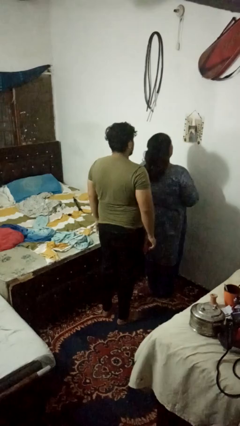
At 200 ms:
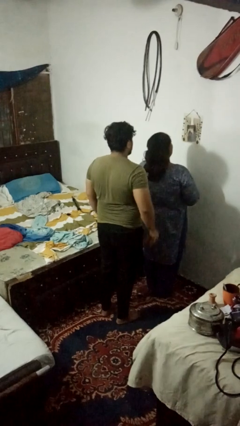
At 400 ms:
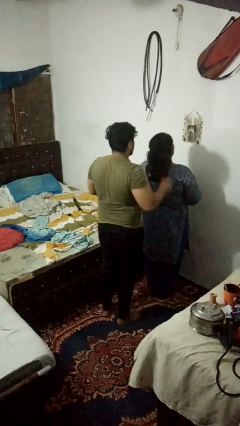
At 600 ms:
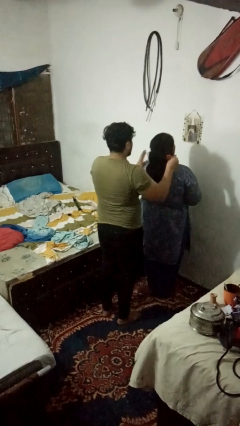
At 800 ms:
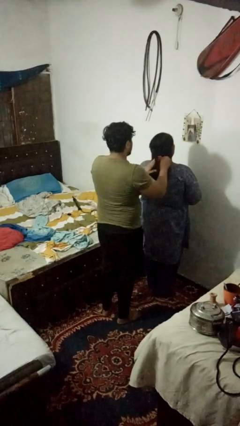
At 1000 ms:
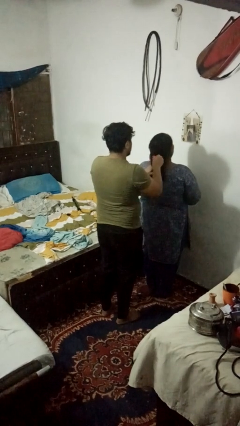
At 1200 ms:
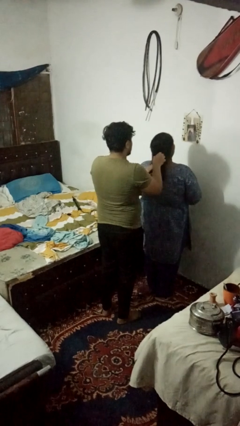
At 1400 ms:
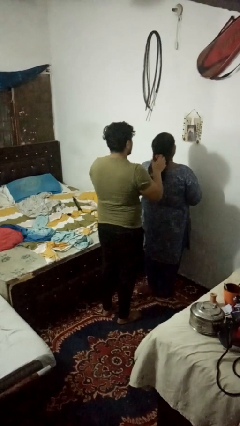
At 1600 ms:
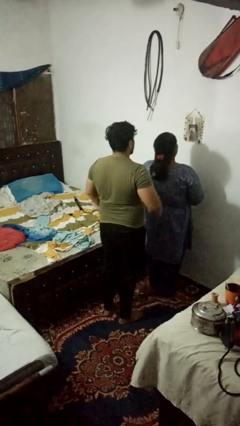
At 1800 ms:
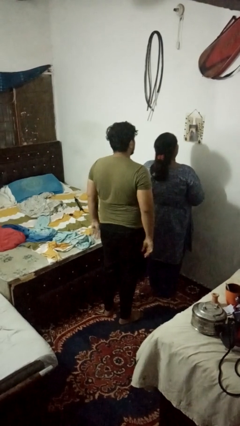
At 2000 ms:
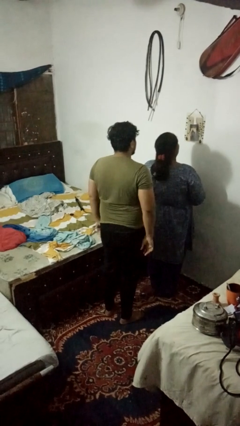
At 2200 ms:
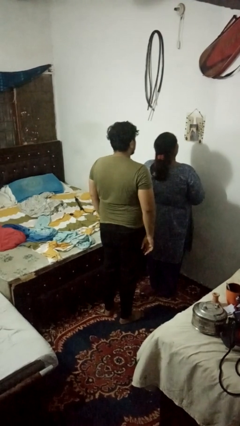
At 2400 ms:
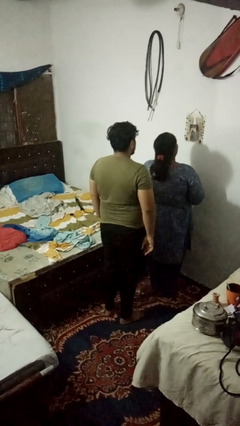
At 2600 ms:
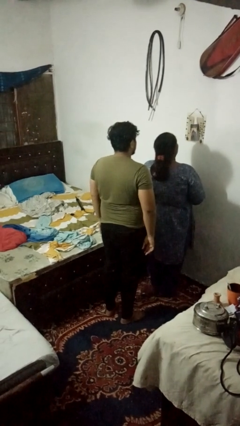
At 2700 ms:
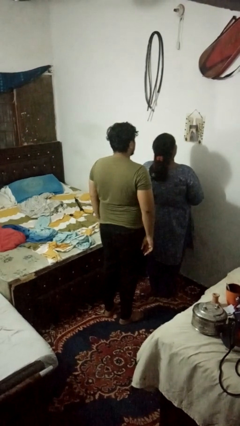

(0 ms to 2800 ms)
person braids hair of person

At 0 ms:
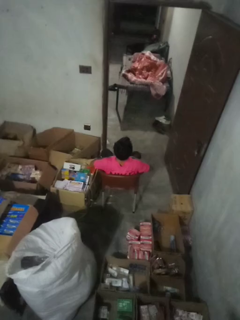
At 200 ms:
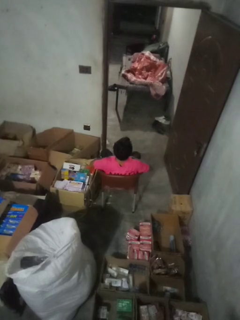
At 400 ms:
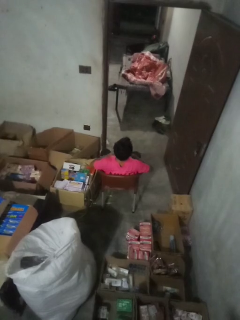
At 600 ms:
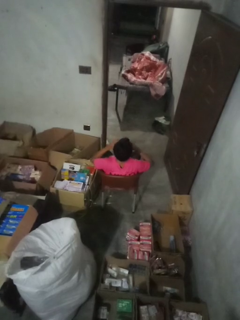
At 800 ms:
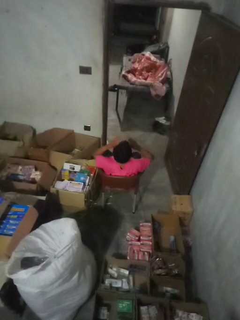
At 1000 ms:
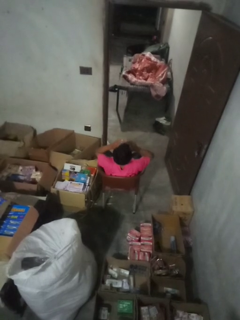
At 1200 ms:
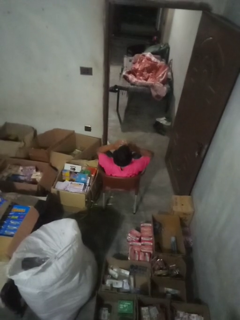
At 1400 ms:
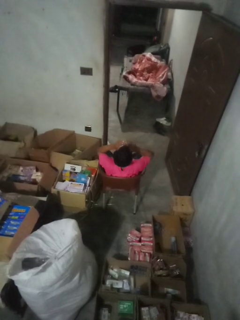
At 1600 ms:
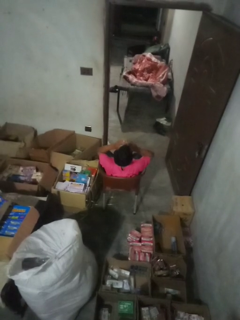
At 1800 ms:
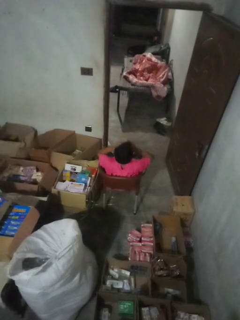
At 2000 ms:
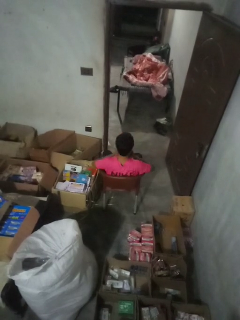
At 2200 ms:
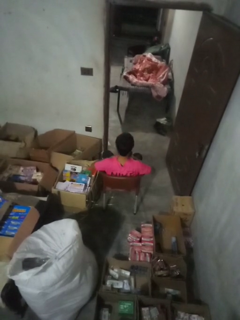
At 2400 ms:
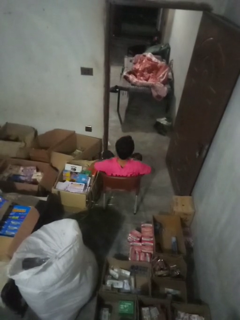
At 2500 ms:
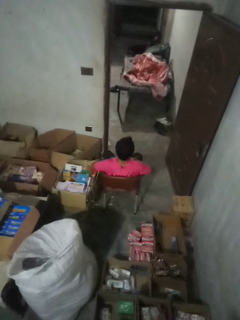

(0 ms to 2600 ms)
person sneezes into hand

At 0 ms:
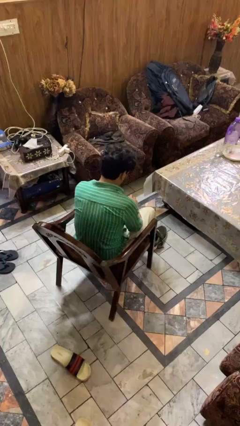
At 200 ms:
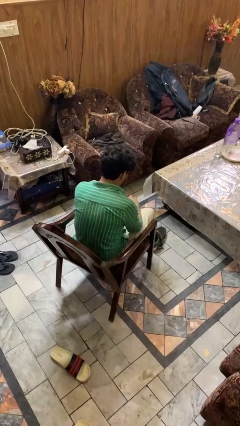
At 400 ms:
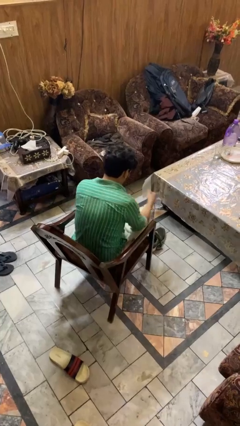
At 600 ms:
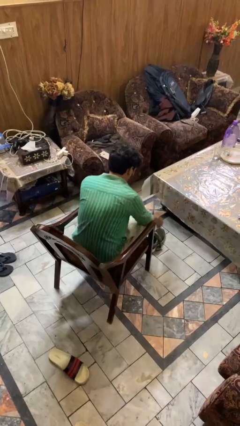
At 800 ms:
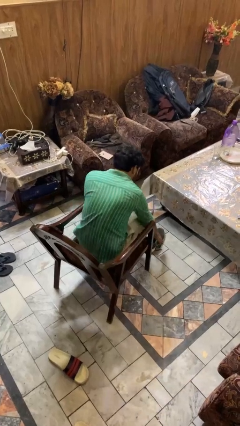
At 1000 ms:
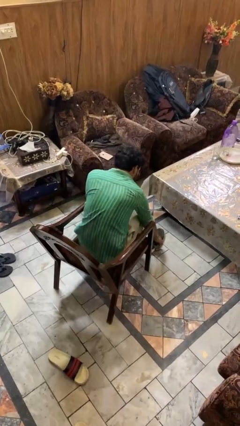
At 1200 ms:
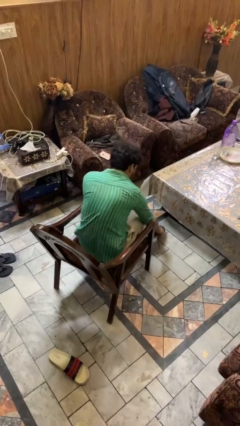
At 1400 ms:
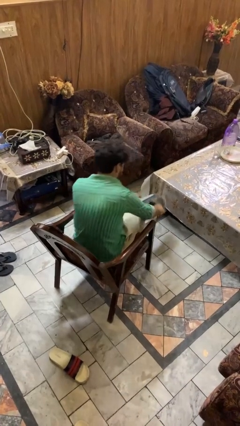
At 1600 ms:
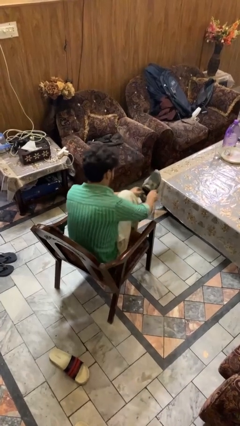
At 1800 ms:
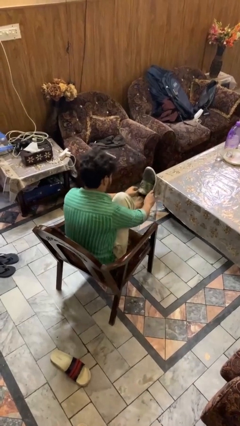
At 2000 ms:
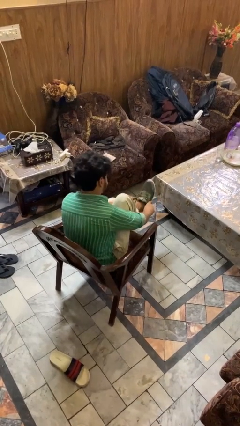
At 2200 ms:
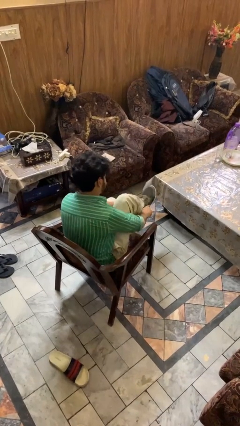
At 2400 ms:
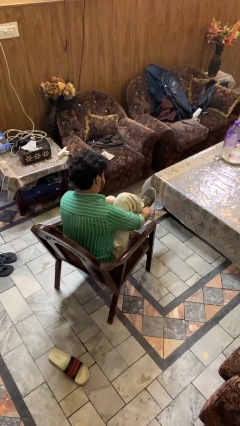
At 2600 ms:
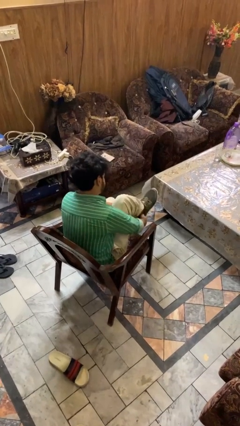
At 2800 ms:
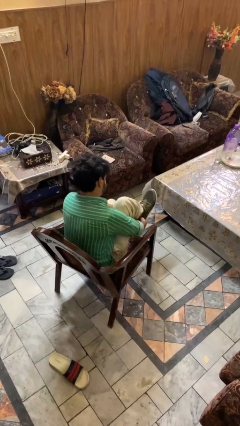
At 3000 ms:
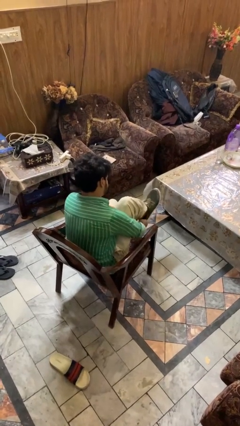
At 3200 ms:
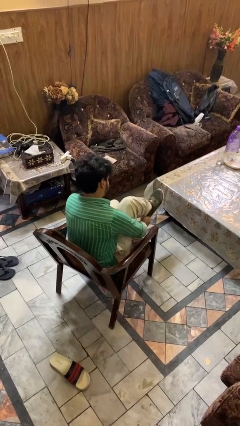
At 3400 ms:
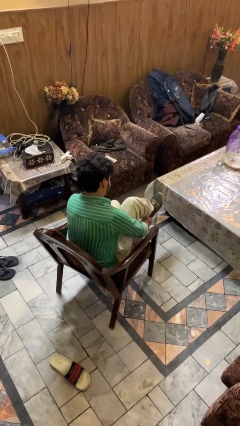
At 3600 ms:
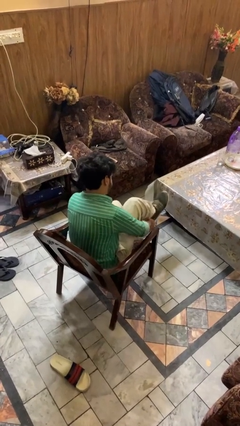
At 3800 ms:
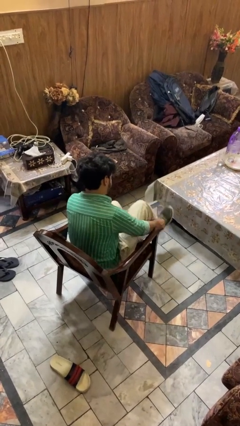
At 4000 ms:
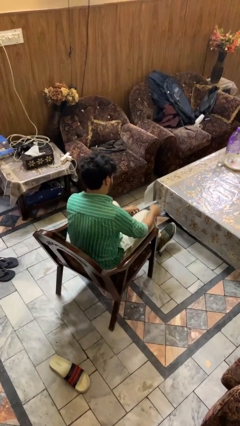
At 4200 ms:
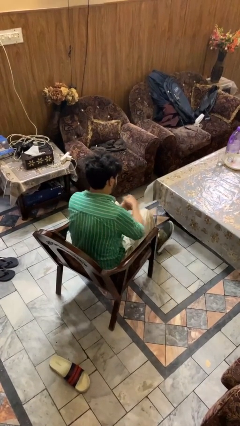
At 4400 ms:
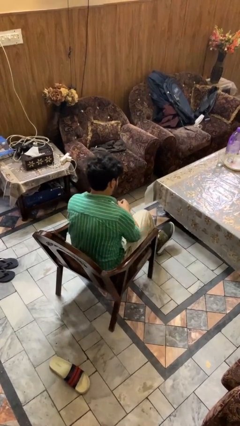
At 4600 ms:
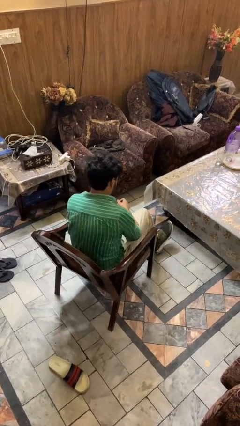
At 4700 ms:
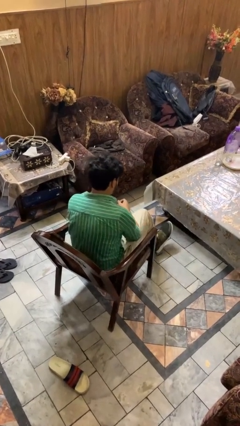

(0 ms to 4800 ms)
person puts on shoes

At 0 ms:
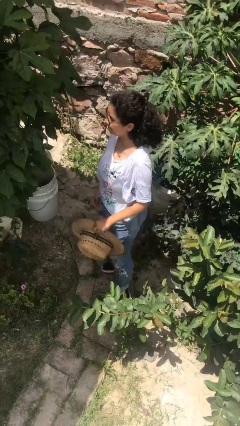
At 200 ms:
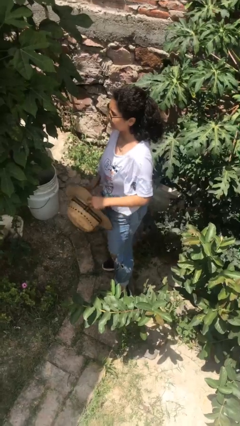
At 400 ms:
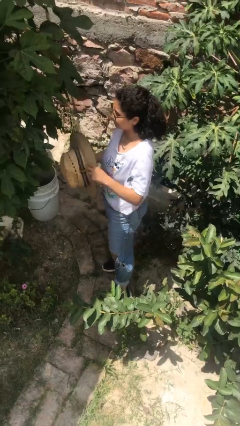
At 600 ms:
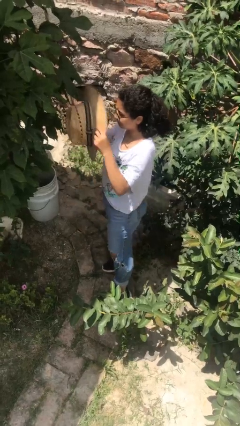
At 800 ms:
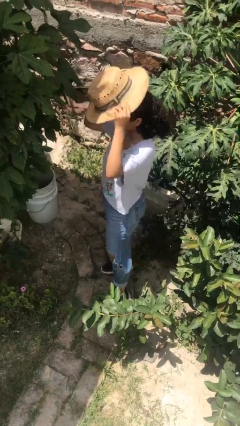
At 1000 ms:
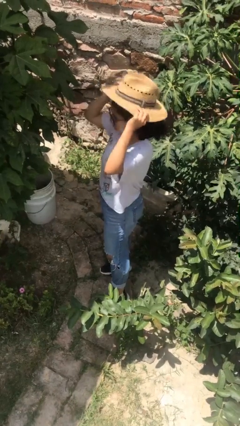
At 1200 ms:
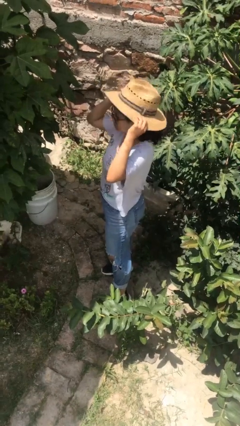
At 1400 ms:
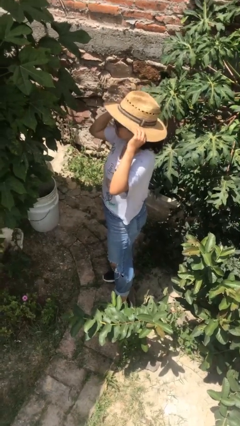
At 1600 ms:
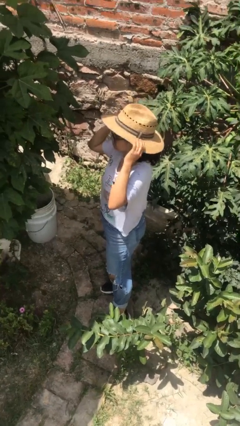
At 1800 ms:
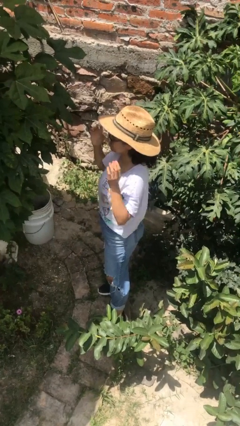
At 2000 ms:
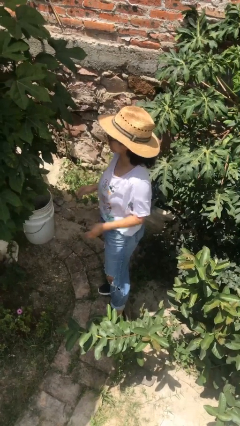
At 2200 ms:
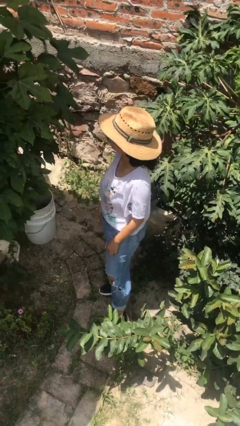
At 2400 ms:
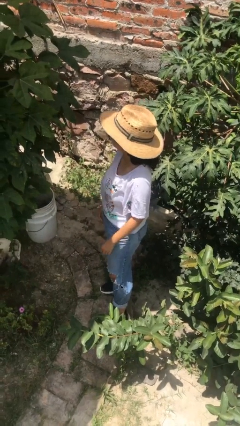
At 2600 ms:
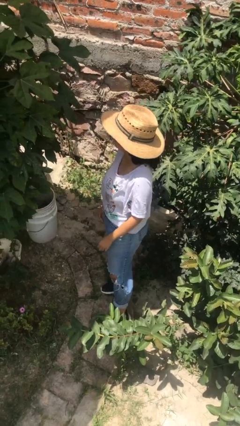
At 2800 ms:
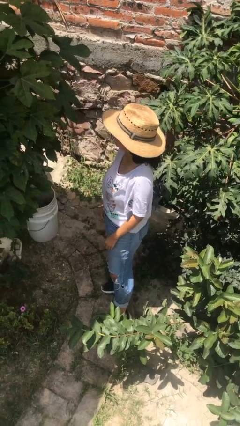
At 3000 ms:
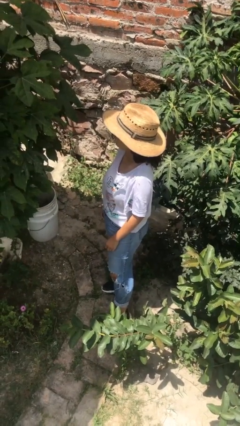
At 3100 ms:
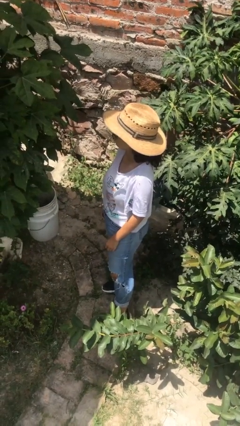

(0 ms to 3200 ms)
person puts on hat

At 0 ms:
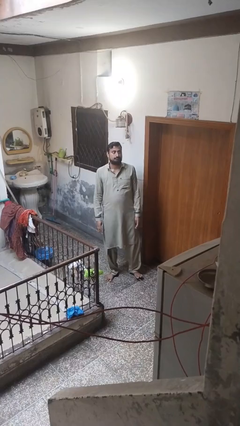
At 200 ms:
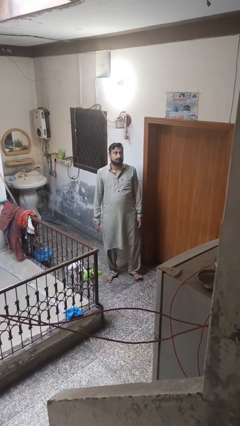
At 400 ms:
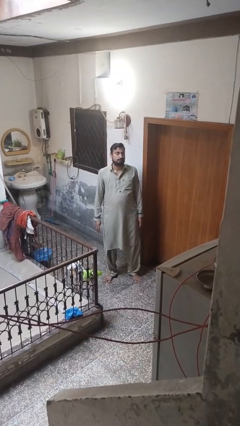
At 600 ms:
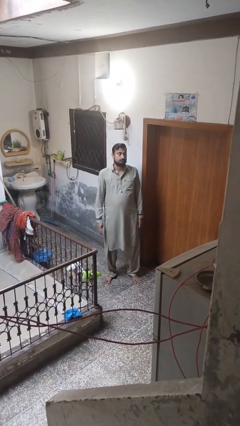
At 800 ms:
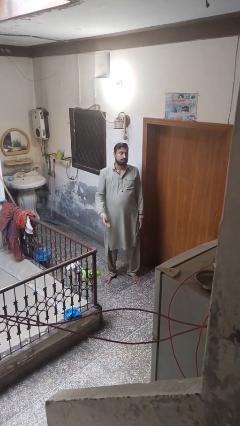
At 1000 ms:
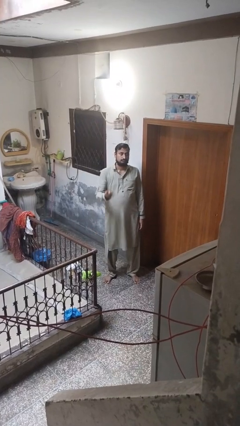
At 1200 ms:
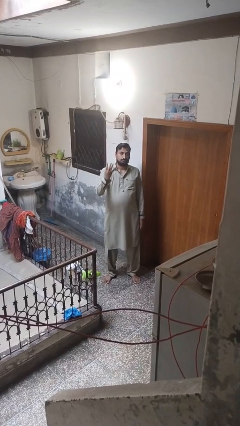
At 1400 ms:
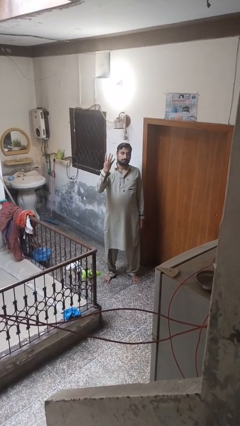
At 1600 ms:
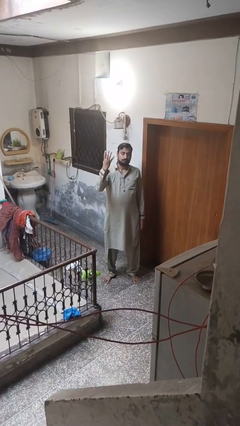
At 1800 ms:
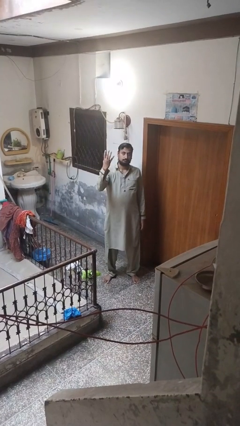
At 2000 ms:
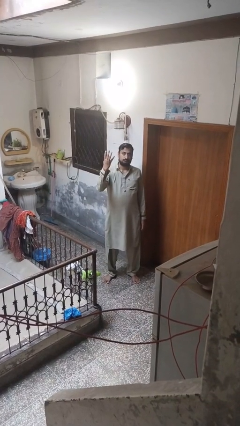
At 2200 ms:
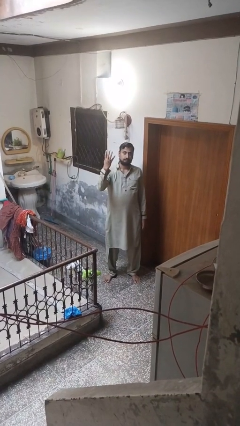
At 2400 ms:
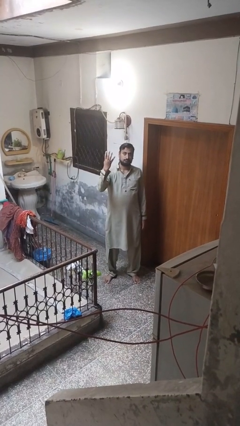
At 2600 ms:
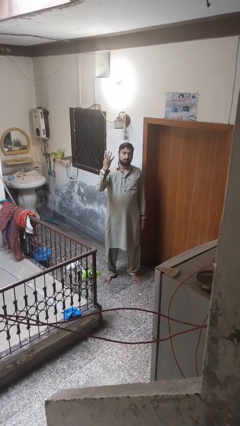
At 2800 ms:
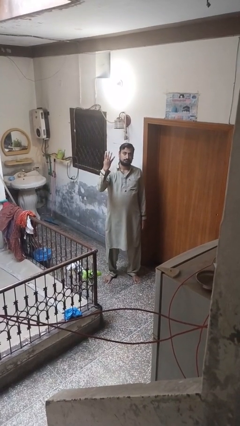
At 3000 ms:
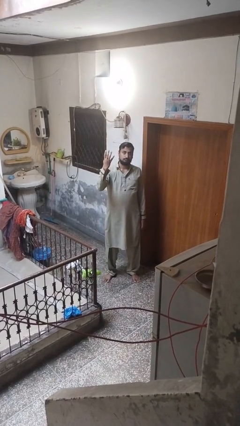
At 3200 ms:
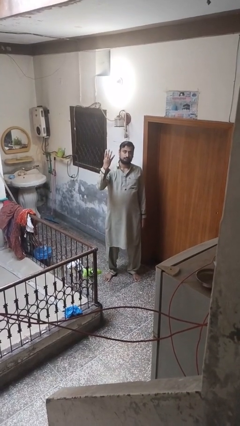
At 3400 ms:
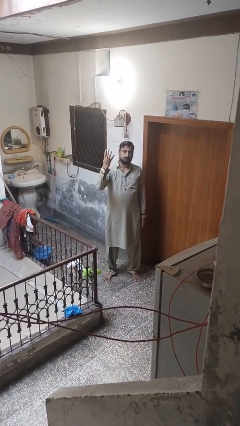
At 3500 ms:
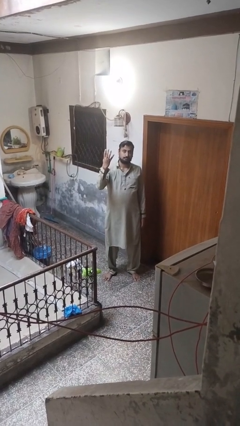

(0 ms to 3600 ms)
person gestures number four

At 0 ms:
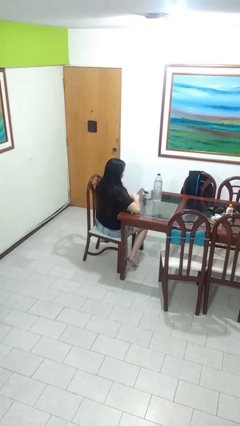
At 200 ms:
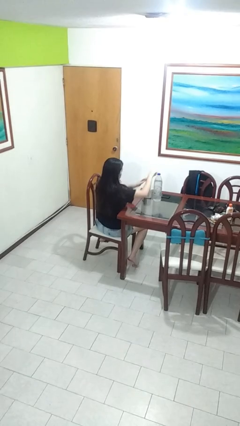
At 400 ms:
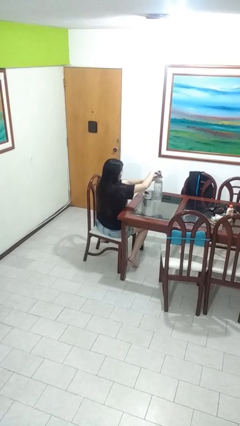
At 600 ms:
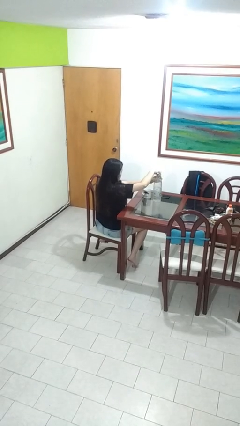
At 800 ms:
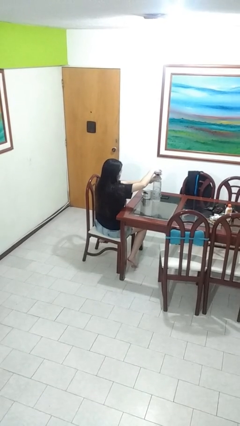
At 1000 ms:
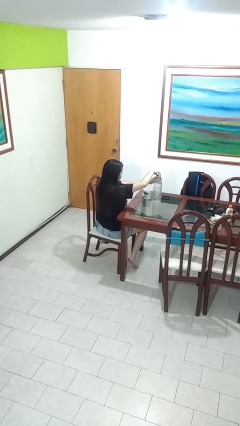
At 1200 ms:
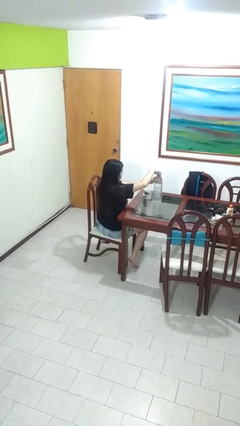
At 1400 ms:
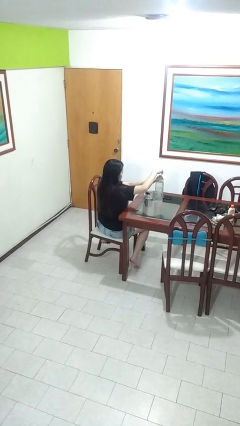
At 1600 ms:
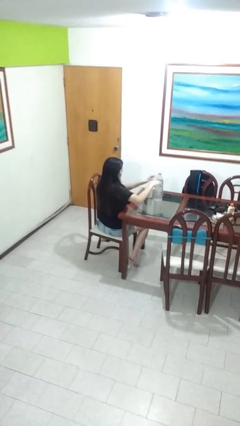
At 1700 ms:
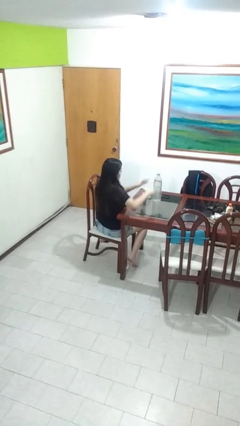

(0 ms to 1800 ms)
person unscrews lid from bottle
